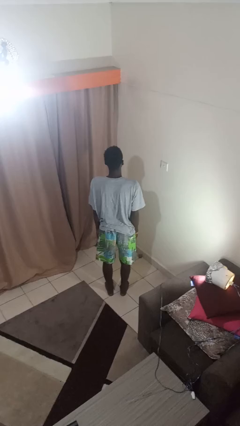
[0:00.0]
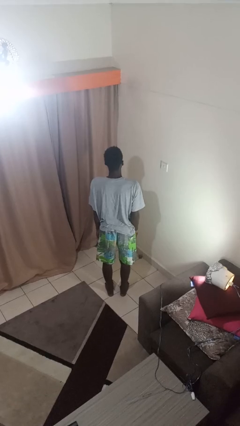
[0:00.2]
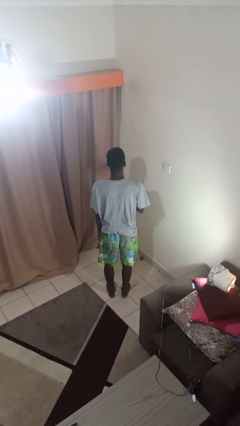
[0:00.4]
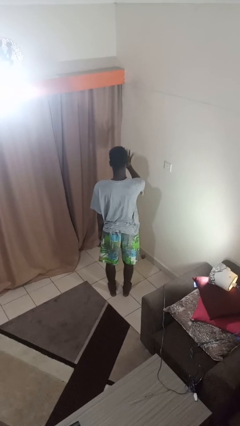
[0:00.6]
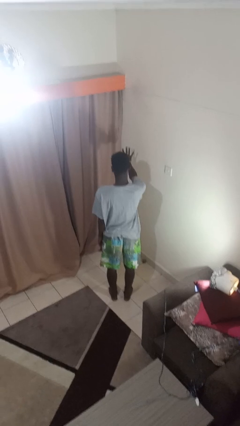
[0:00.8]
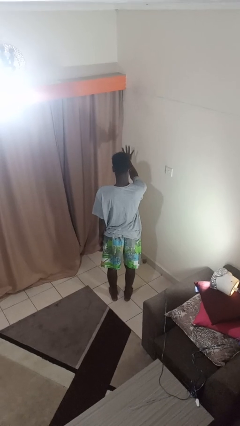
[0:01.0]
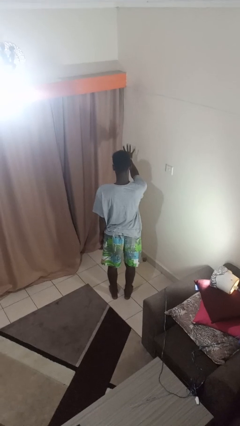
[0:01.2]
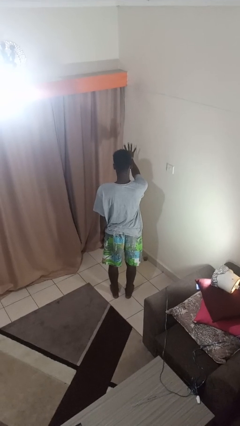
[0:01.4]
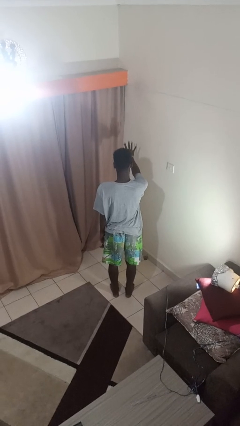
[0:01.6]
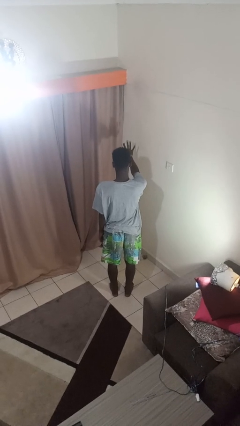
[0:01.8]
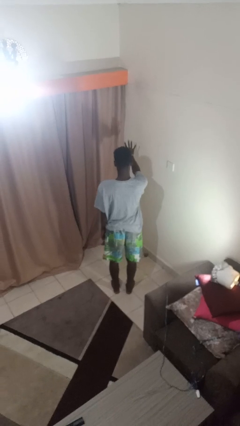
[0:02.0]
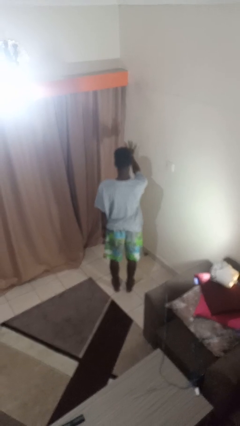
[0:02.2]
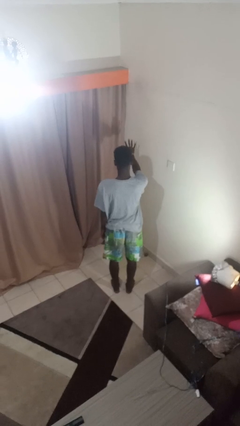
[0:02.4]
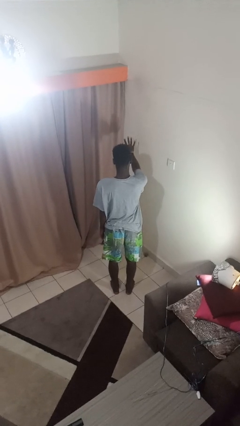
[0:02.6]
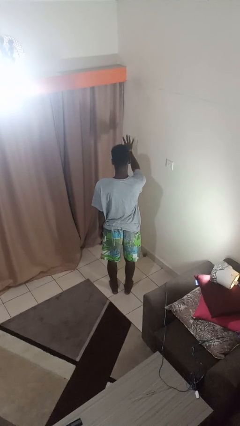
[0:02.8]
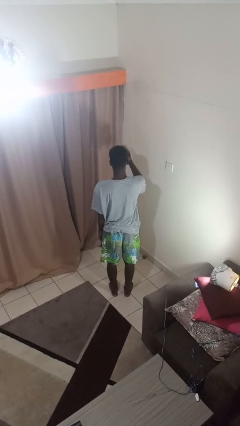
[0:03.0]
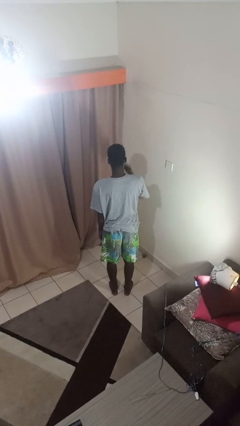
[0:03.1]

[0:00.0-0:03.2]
person gestures number five

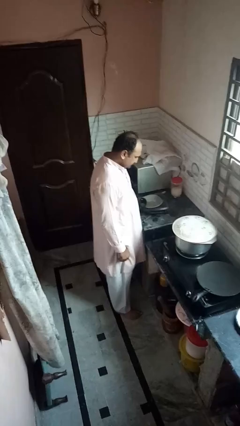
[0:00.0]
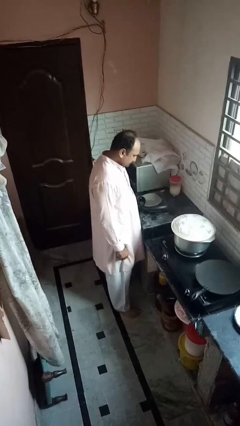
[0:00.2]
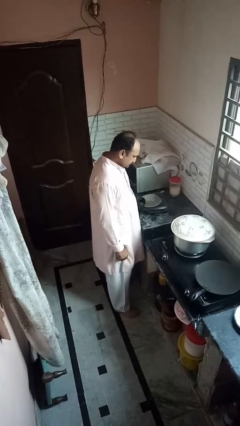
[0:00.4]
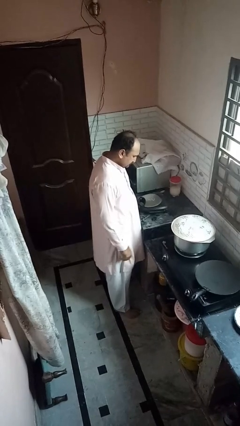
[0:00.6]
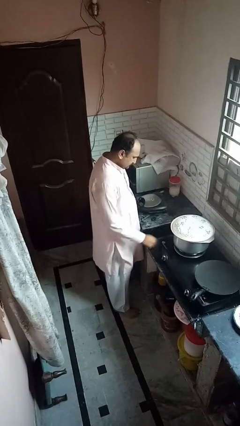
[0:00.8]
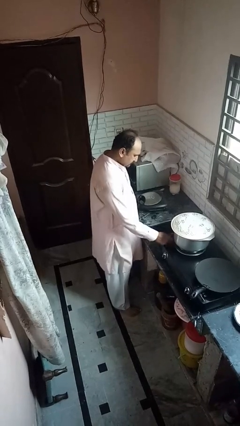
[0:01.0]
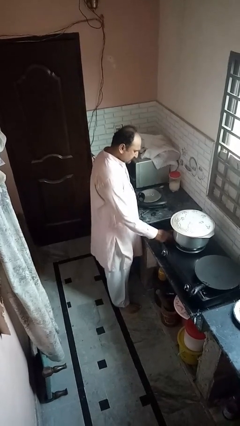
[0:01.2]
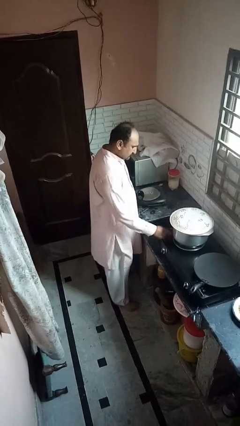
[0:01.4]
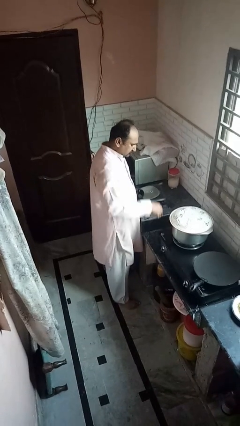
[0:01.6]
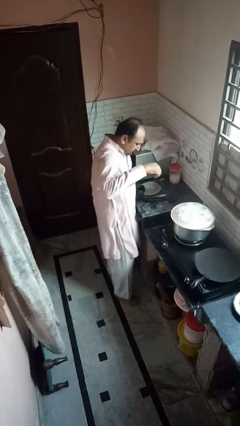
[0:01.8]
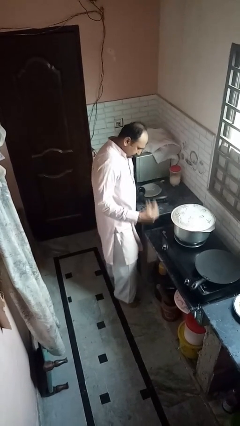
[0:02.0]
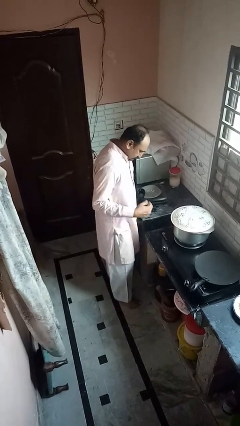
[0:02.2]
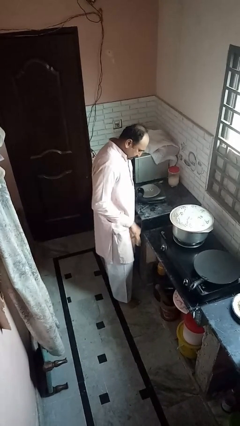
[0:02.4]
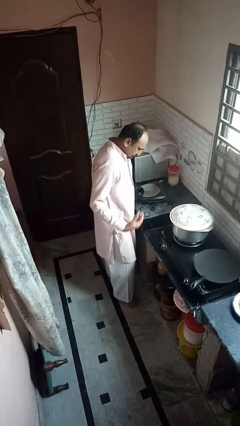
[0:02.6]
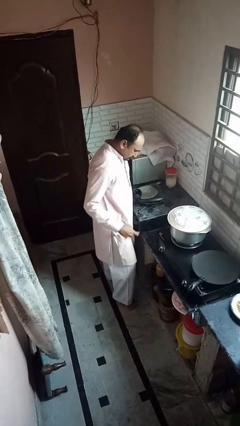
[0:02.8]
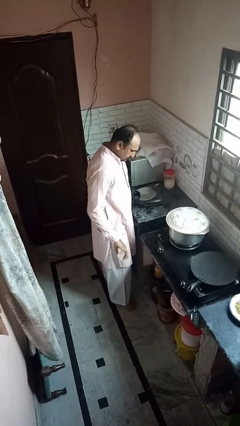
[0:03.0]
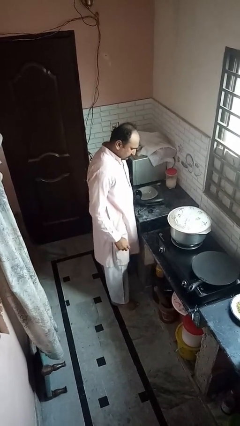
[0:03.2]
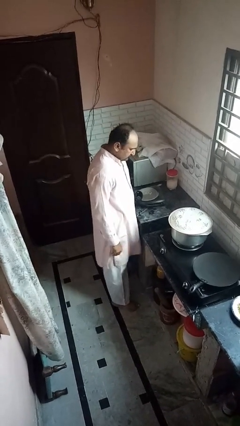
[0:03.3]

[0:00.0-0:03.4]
person burns hand

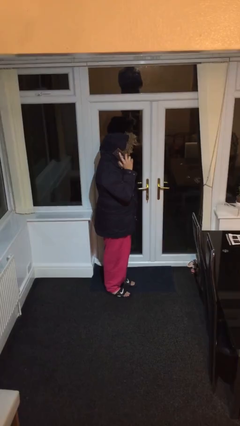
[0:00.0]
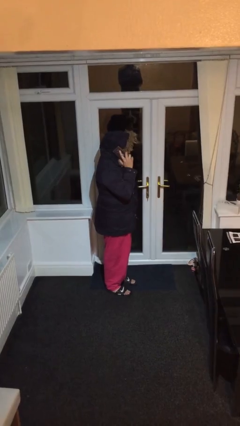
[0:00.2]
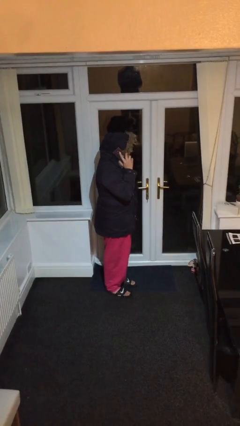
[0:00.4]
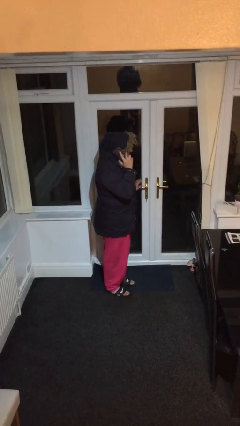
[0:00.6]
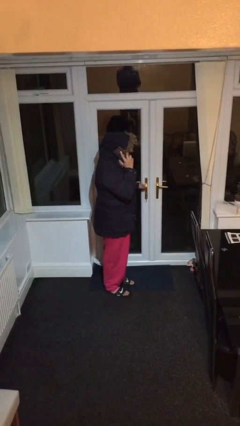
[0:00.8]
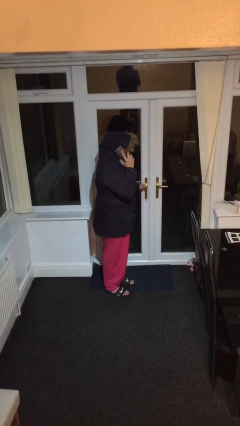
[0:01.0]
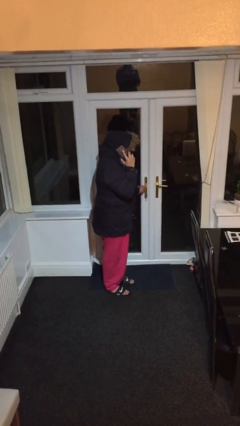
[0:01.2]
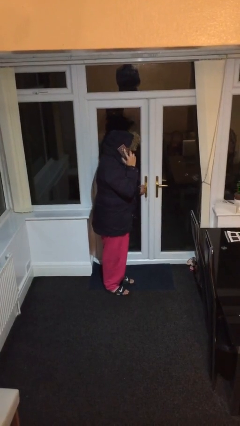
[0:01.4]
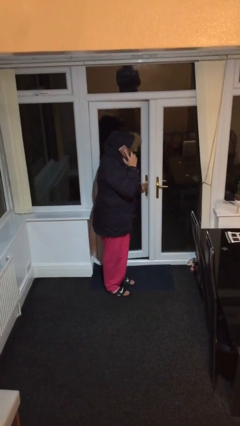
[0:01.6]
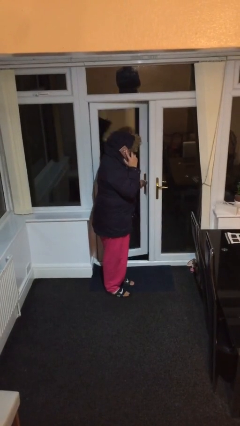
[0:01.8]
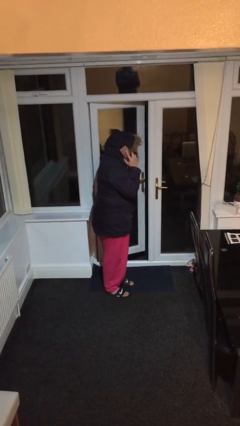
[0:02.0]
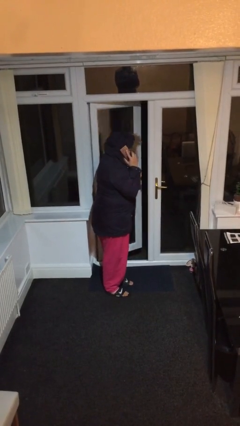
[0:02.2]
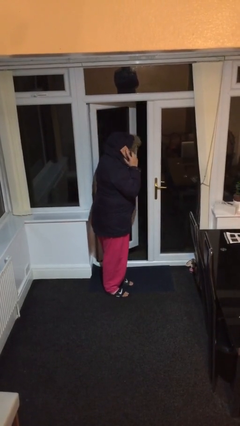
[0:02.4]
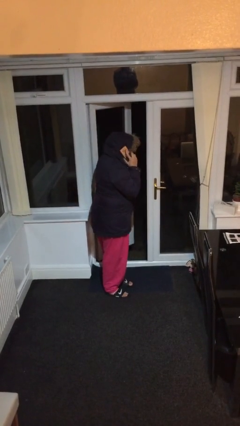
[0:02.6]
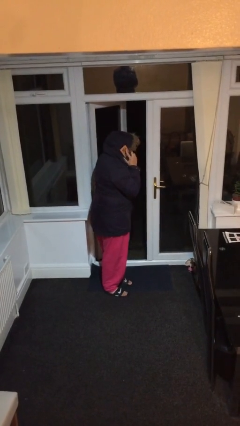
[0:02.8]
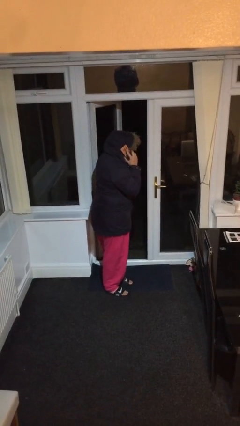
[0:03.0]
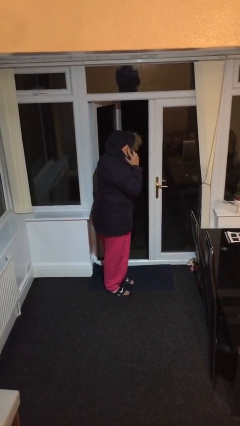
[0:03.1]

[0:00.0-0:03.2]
person opens facility door

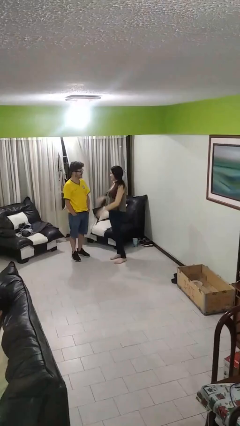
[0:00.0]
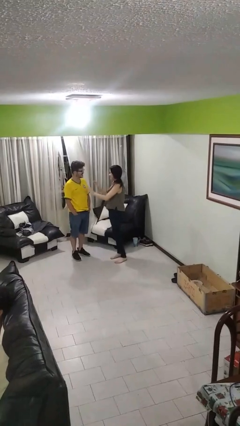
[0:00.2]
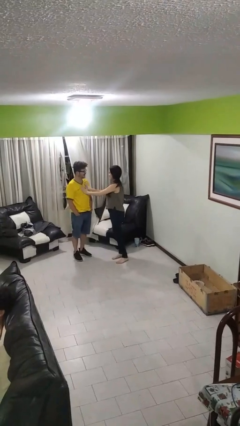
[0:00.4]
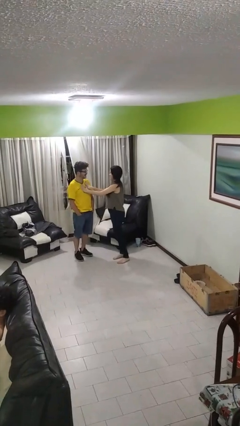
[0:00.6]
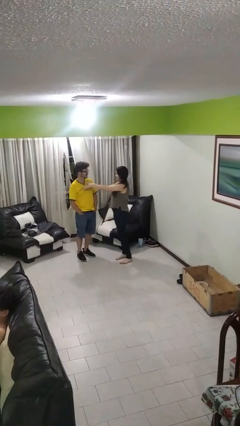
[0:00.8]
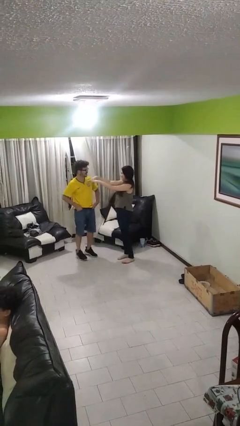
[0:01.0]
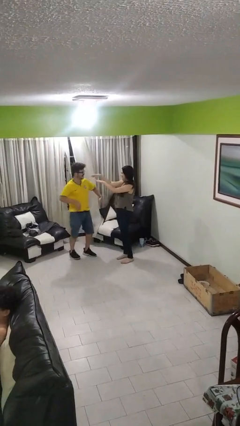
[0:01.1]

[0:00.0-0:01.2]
person shoves person

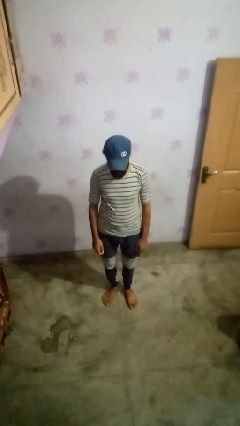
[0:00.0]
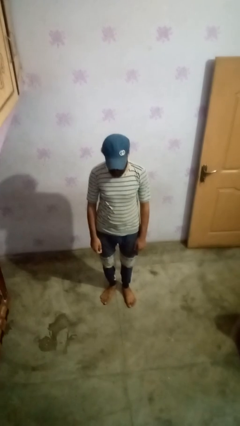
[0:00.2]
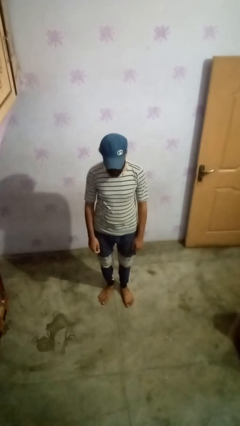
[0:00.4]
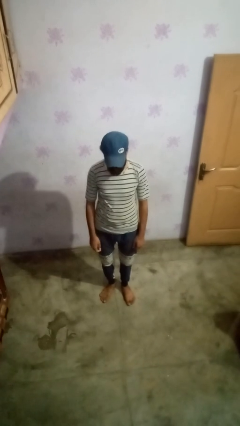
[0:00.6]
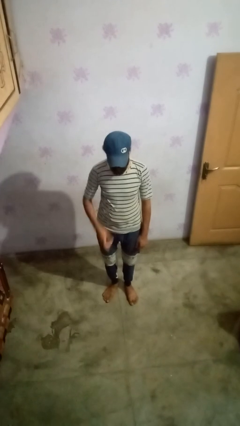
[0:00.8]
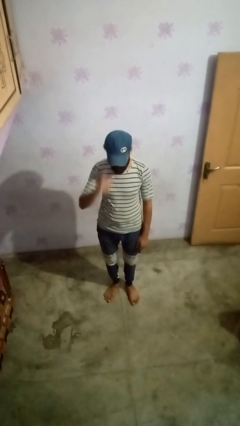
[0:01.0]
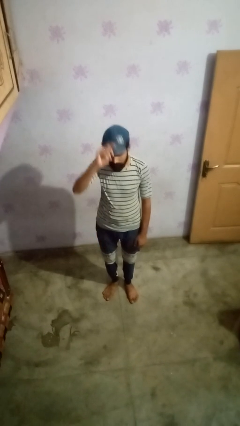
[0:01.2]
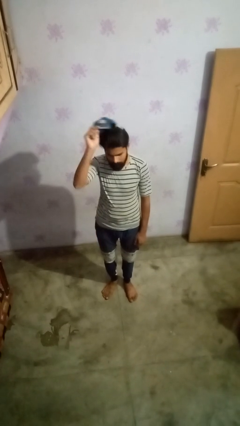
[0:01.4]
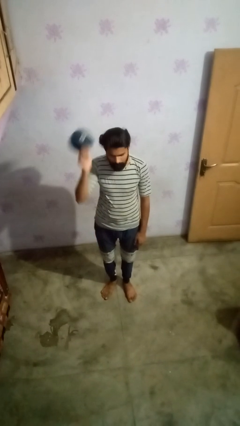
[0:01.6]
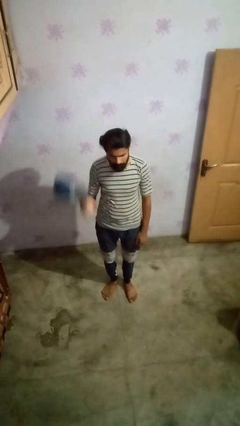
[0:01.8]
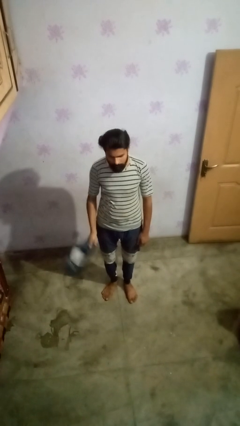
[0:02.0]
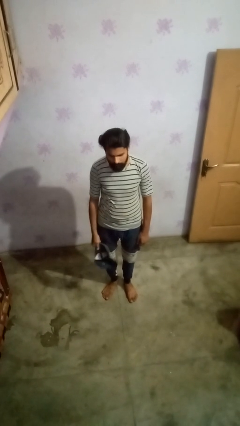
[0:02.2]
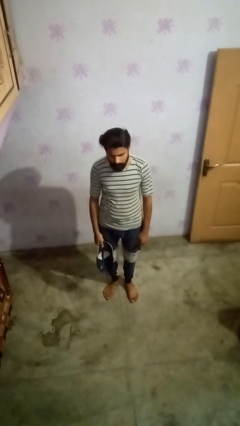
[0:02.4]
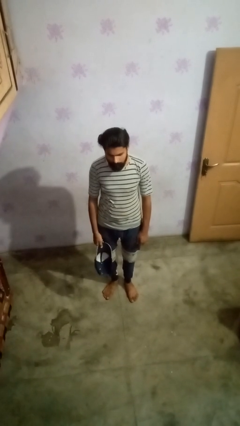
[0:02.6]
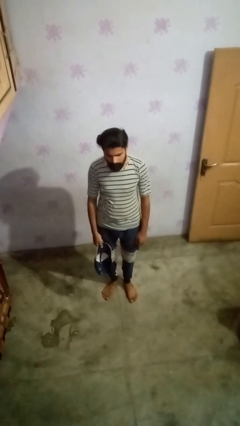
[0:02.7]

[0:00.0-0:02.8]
person takes off hat

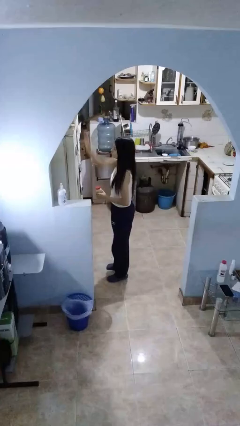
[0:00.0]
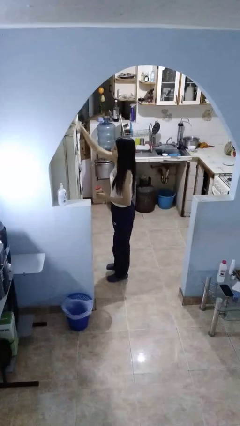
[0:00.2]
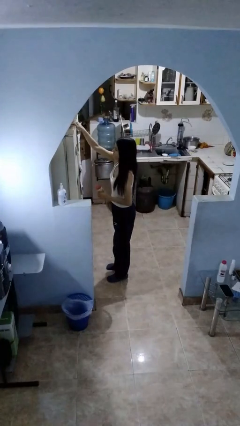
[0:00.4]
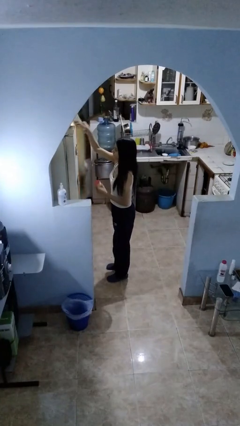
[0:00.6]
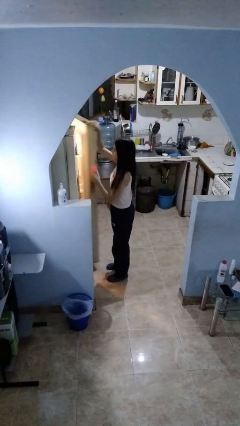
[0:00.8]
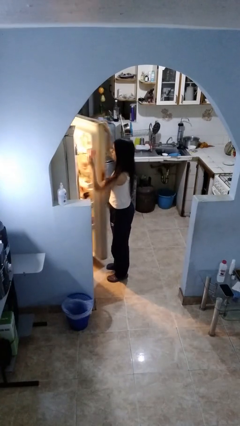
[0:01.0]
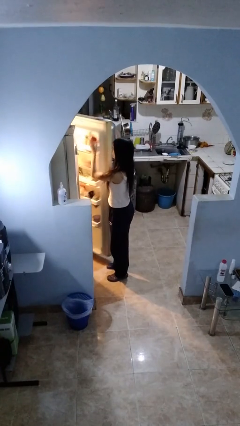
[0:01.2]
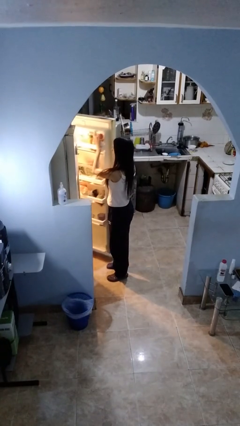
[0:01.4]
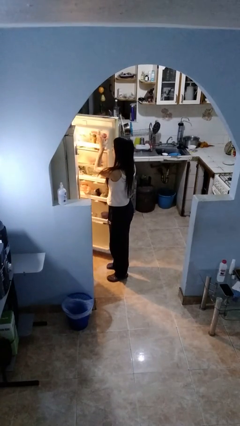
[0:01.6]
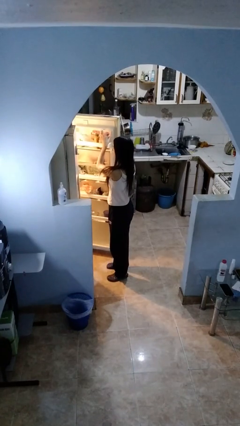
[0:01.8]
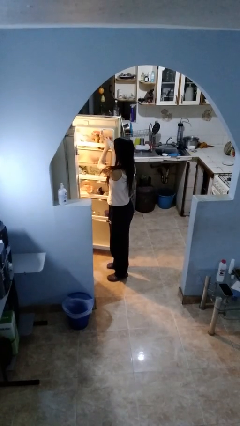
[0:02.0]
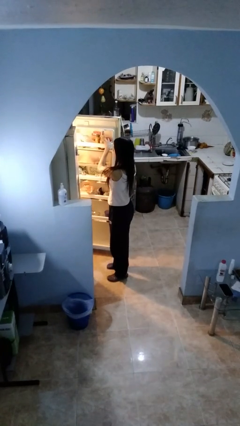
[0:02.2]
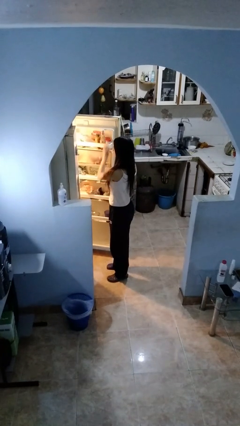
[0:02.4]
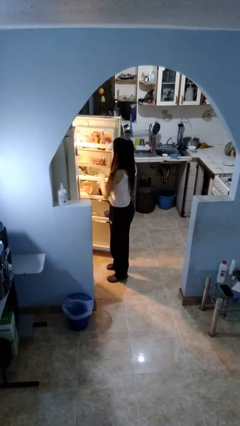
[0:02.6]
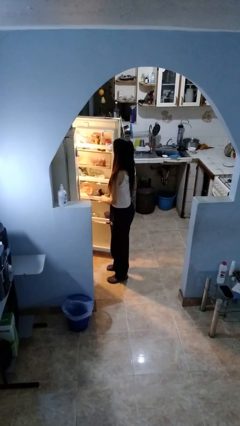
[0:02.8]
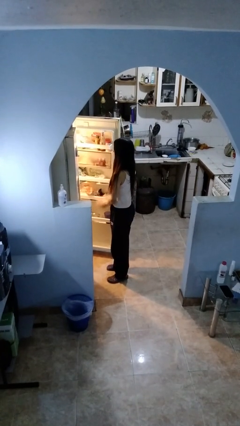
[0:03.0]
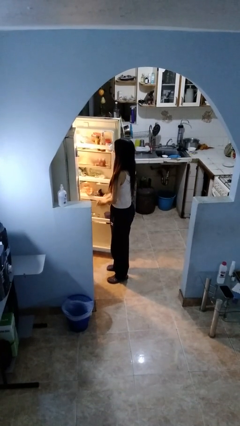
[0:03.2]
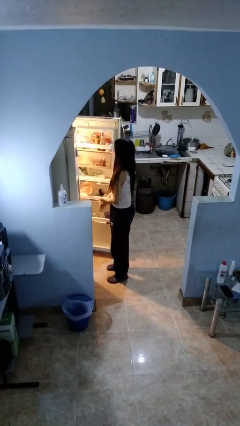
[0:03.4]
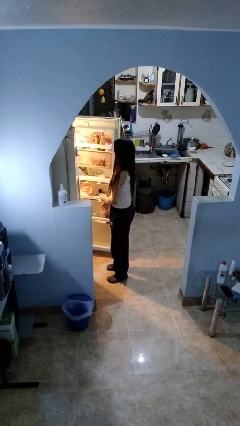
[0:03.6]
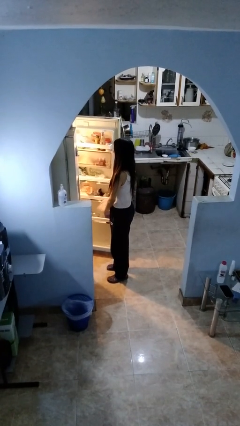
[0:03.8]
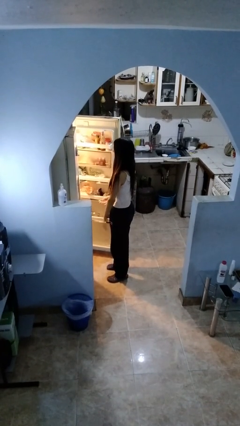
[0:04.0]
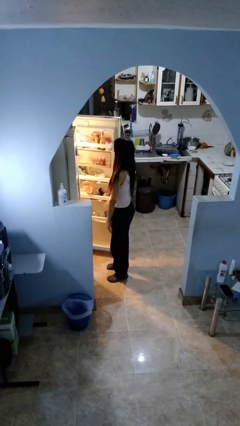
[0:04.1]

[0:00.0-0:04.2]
person puts object into refrigerator
